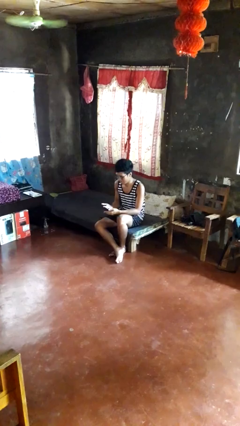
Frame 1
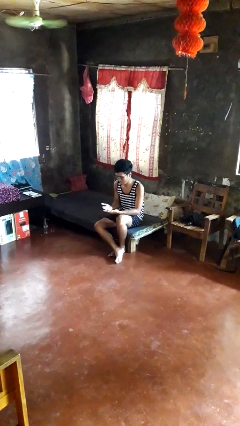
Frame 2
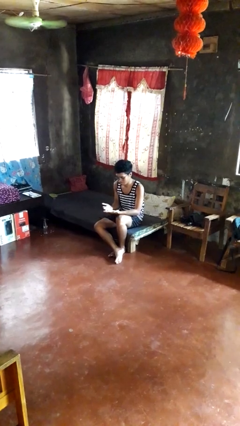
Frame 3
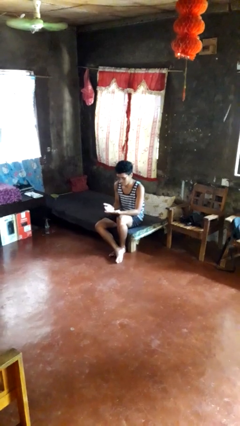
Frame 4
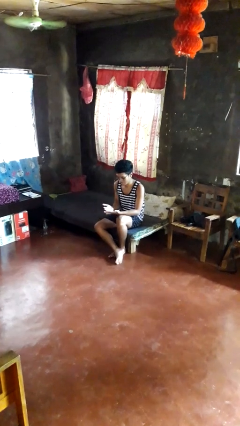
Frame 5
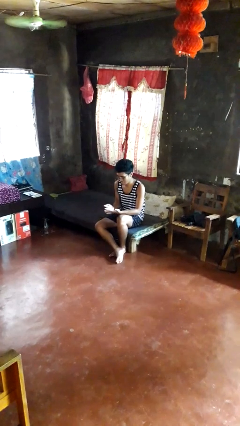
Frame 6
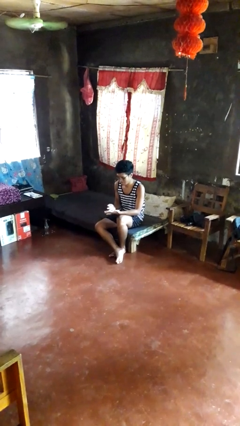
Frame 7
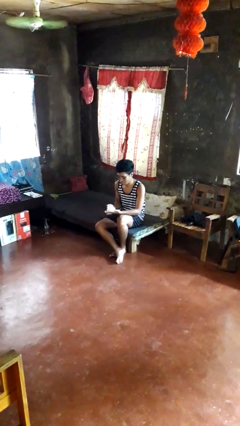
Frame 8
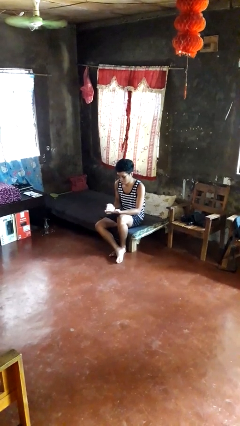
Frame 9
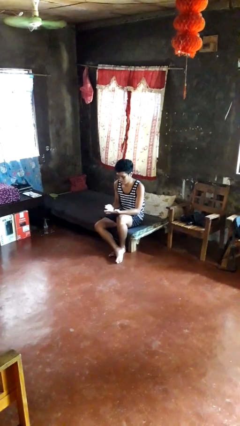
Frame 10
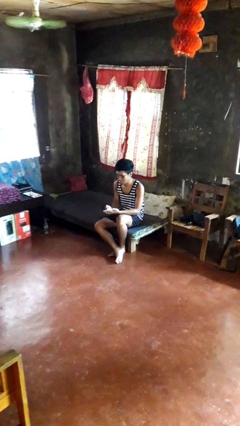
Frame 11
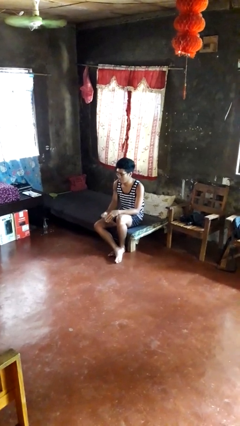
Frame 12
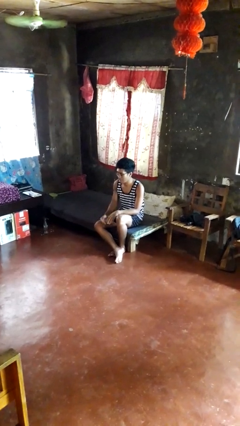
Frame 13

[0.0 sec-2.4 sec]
person looks at hands in lap

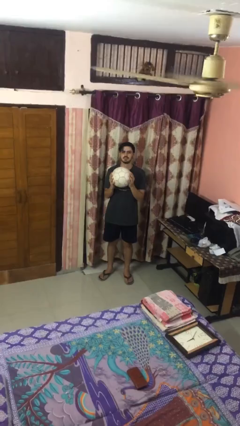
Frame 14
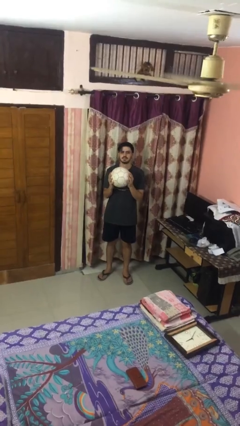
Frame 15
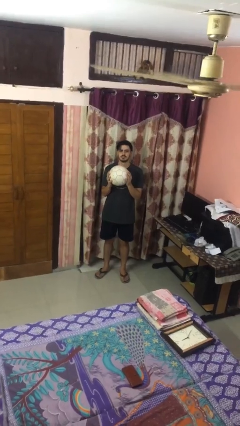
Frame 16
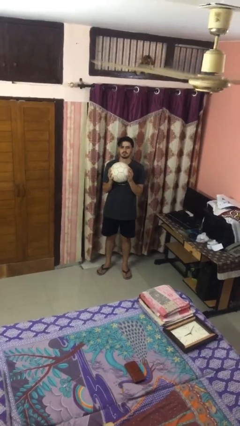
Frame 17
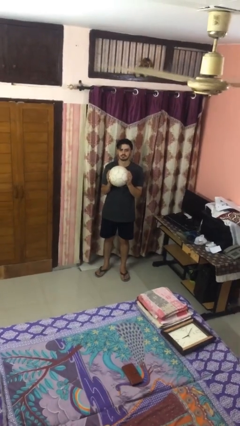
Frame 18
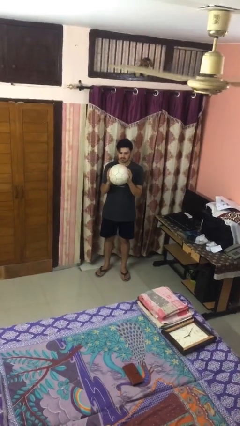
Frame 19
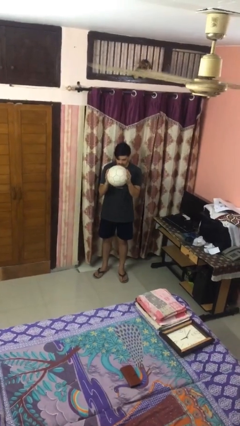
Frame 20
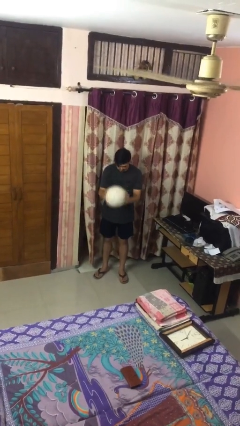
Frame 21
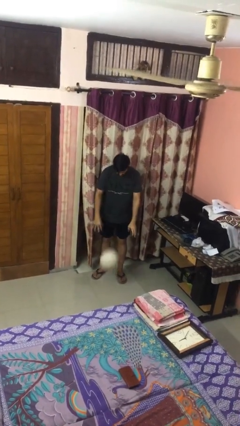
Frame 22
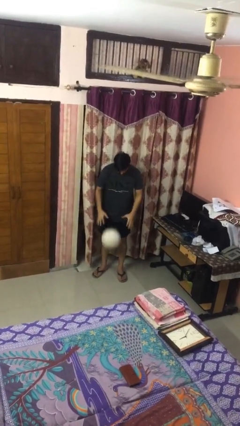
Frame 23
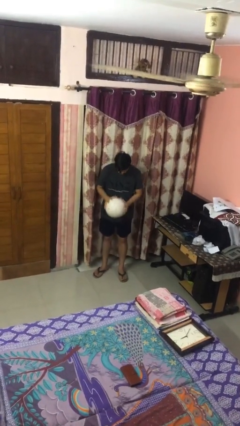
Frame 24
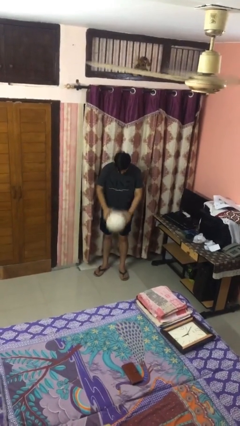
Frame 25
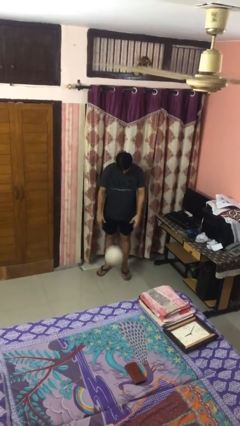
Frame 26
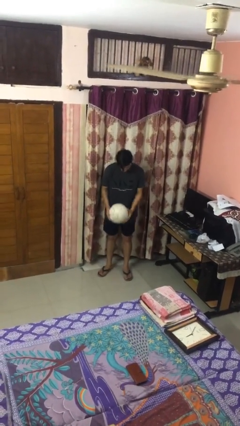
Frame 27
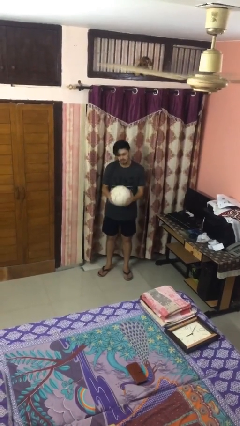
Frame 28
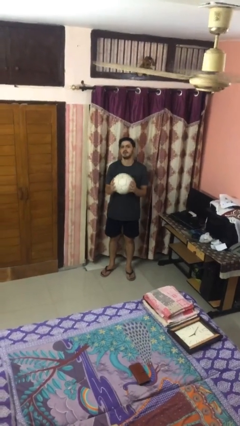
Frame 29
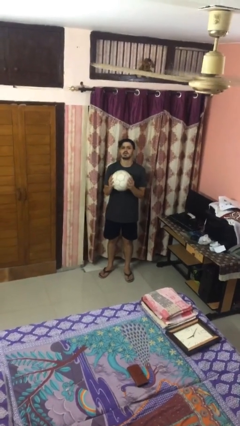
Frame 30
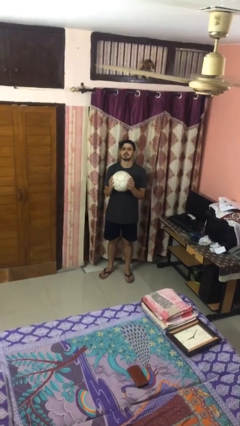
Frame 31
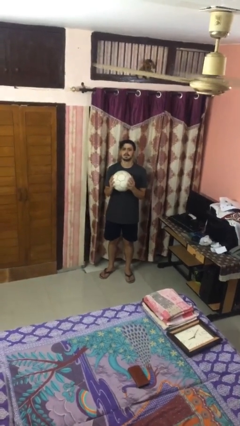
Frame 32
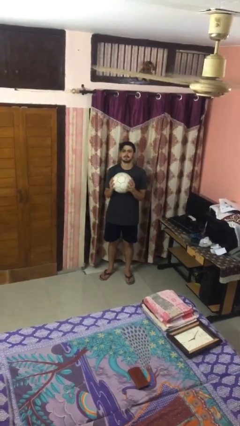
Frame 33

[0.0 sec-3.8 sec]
person bounces ball on floor

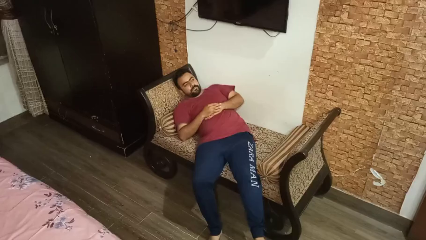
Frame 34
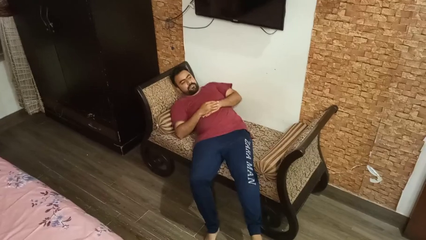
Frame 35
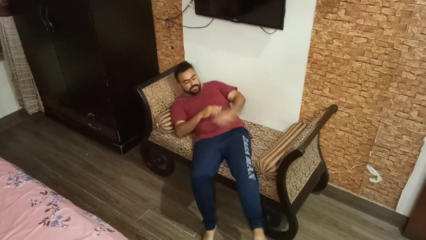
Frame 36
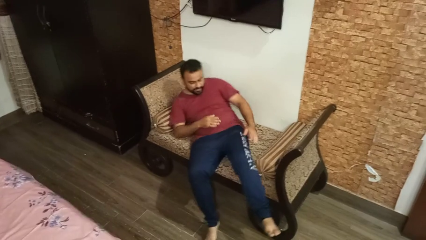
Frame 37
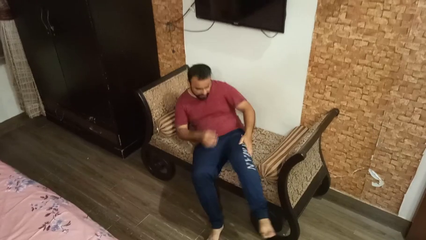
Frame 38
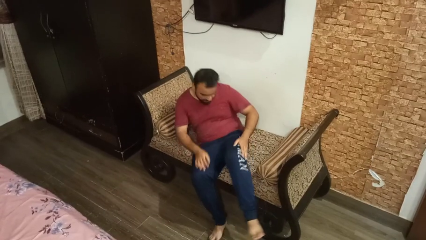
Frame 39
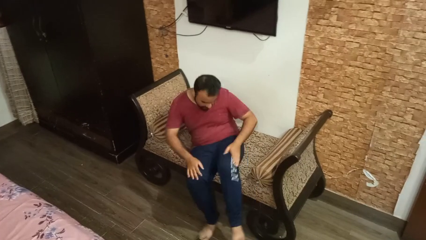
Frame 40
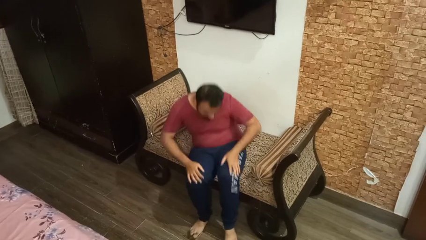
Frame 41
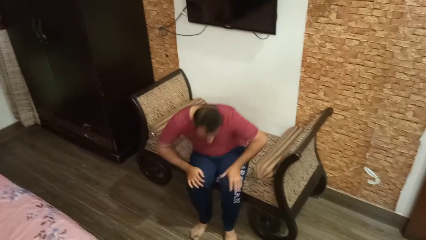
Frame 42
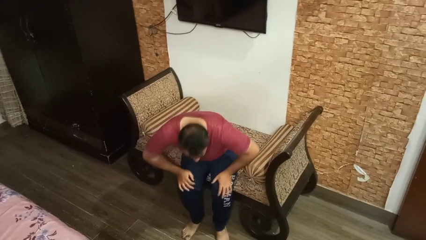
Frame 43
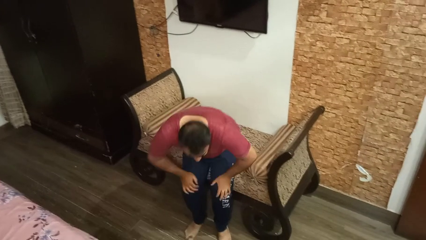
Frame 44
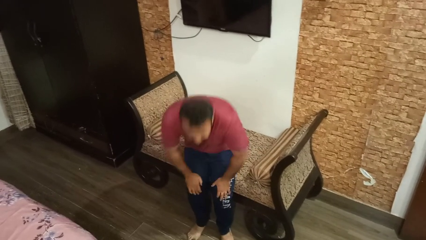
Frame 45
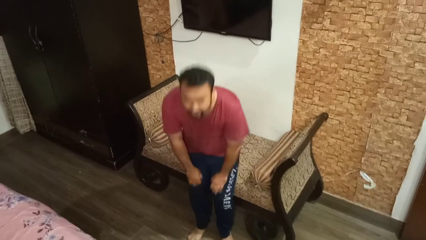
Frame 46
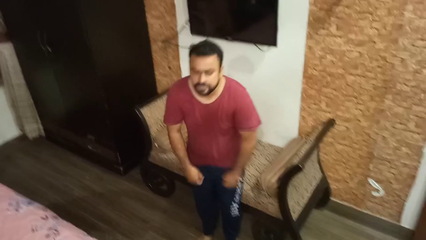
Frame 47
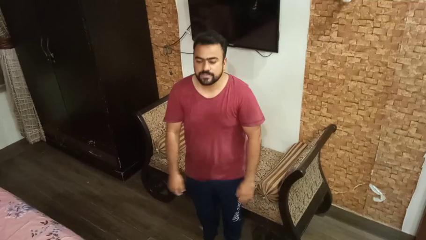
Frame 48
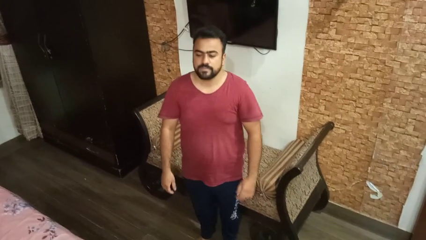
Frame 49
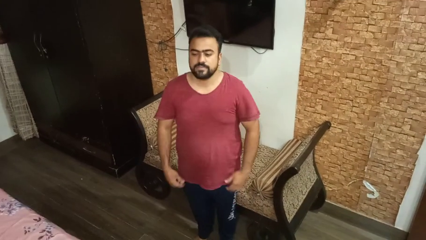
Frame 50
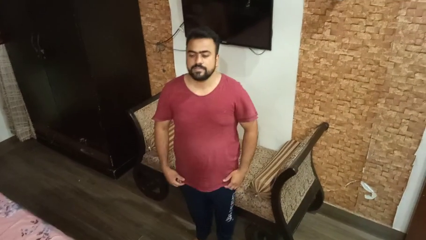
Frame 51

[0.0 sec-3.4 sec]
person stands up

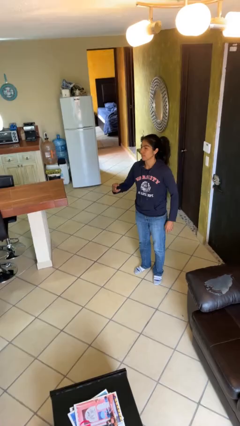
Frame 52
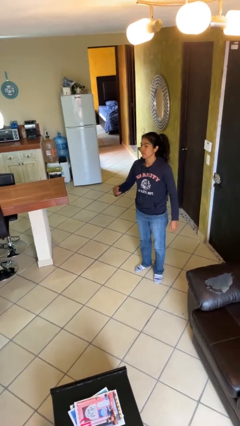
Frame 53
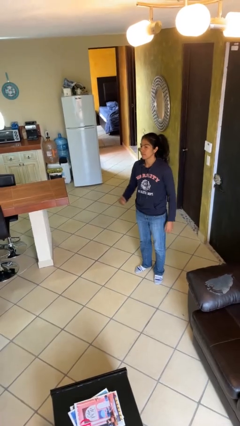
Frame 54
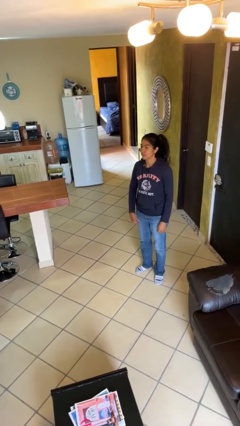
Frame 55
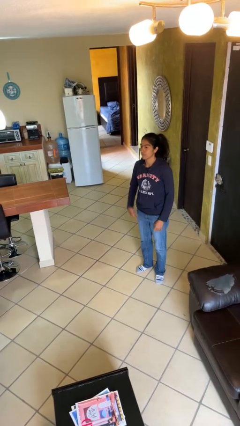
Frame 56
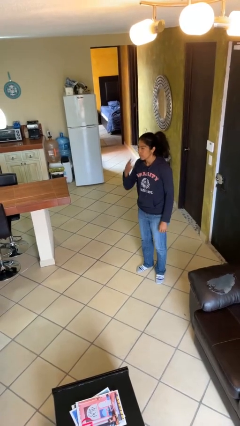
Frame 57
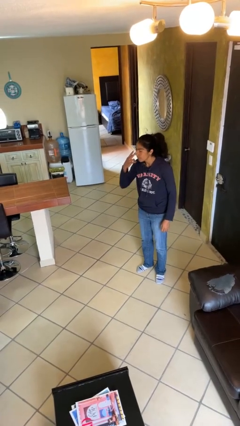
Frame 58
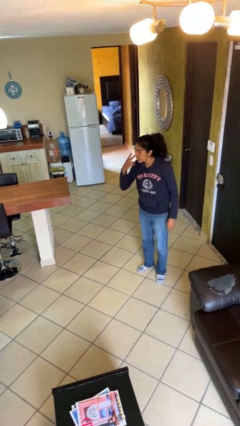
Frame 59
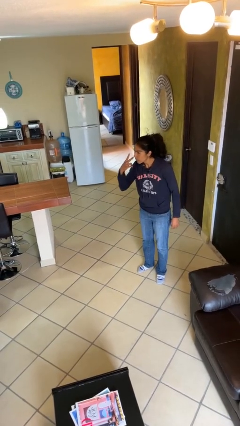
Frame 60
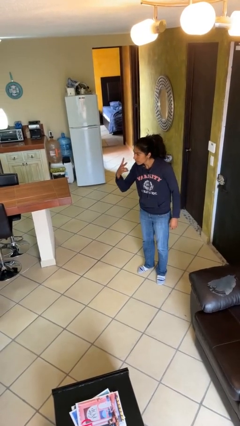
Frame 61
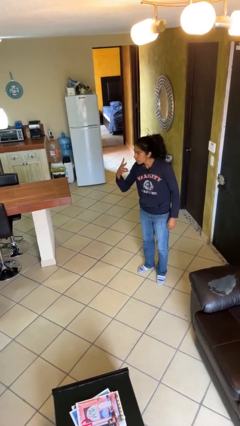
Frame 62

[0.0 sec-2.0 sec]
person gestures watch closely

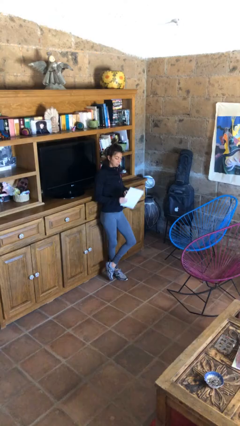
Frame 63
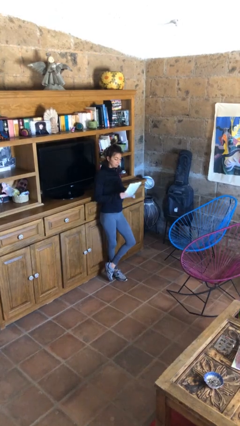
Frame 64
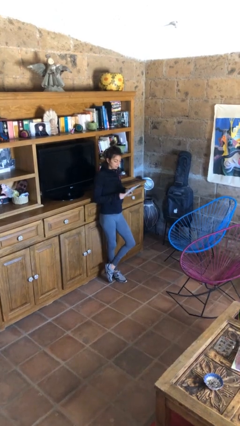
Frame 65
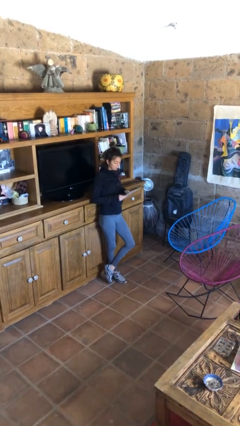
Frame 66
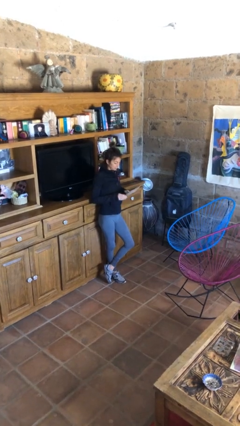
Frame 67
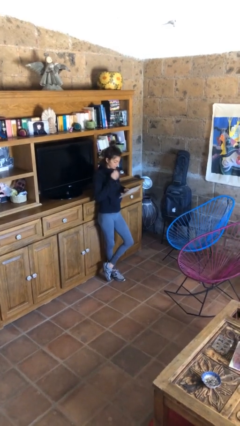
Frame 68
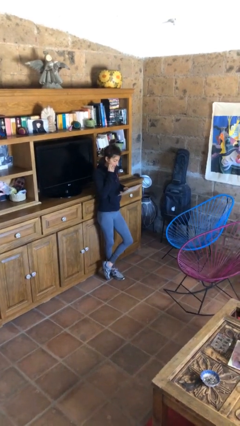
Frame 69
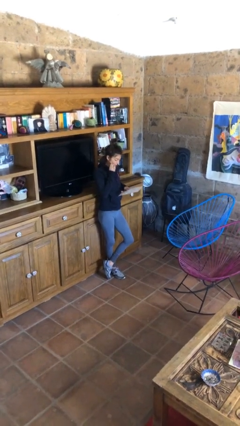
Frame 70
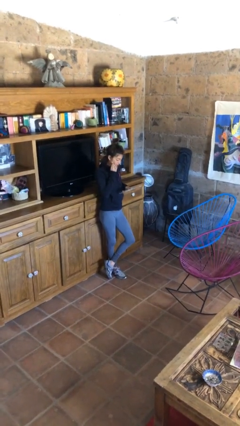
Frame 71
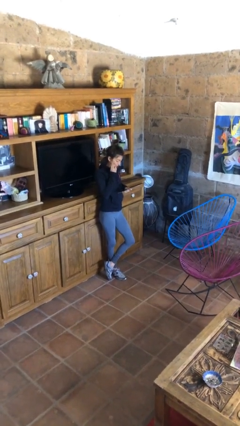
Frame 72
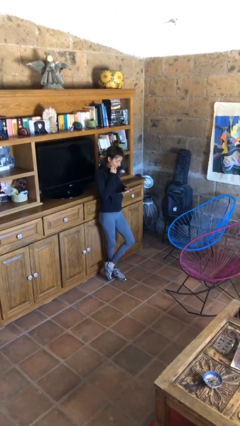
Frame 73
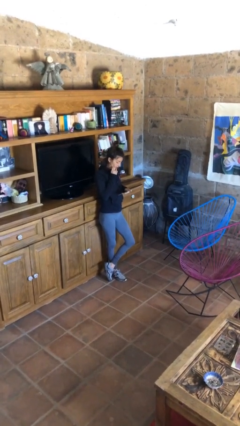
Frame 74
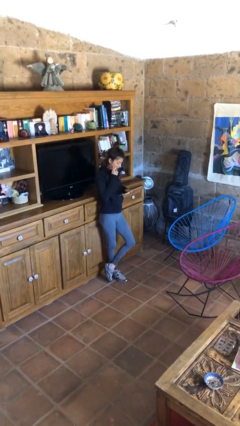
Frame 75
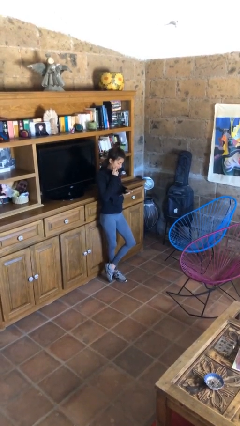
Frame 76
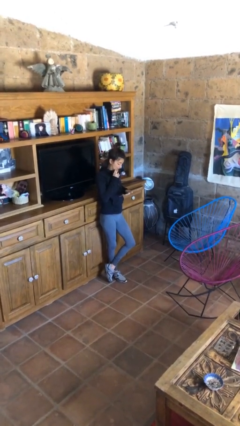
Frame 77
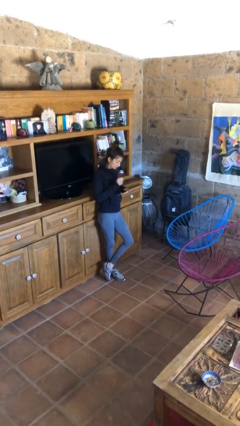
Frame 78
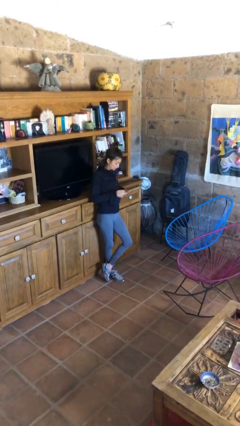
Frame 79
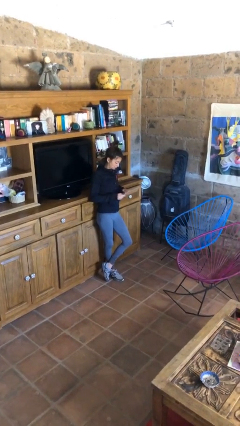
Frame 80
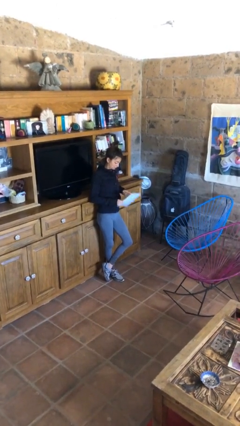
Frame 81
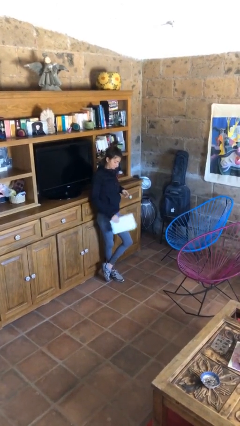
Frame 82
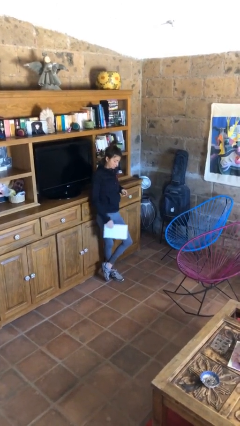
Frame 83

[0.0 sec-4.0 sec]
person reads document

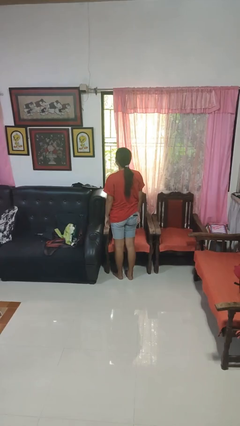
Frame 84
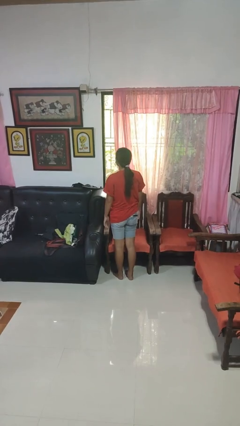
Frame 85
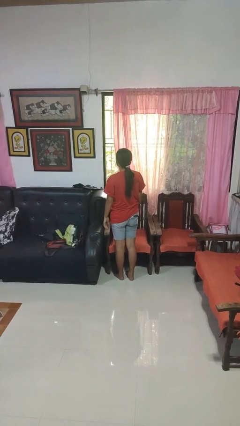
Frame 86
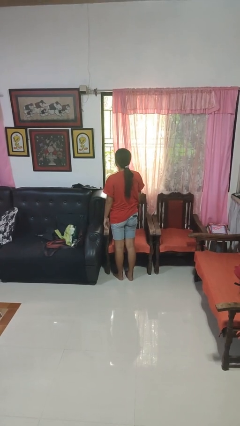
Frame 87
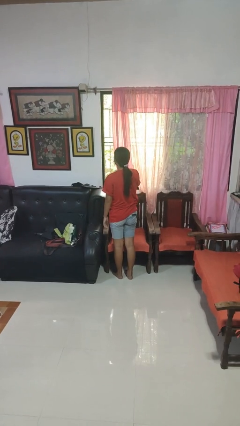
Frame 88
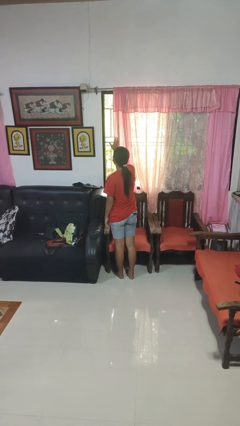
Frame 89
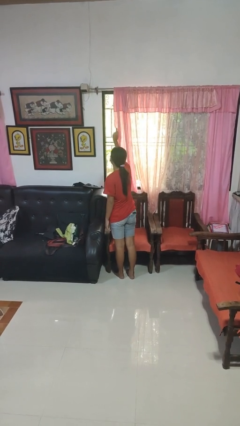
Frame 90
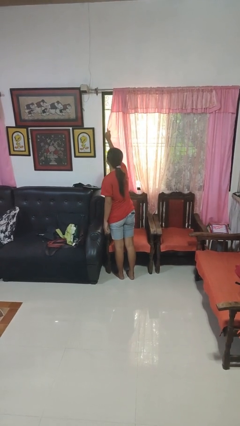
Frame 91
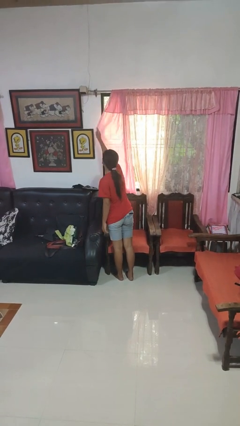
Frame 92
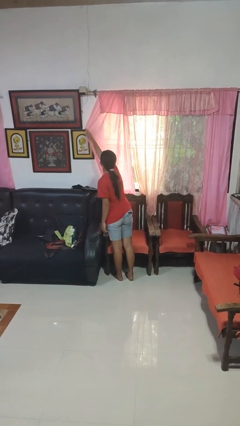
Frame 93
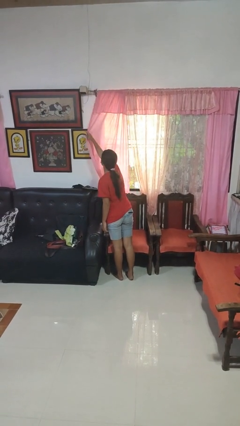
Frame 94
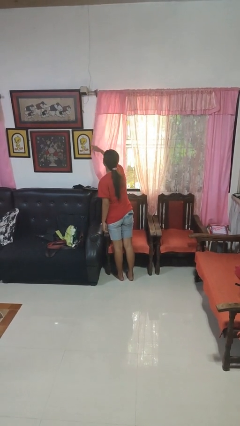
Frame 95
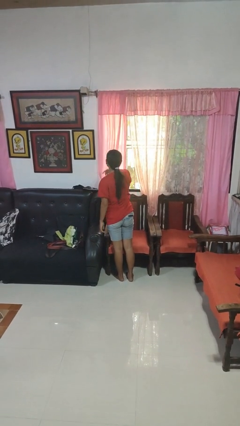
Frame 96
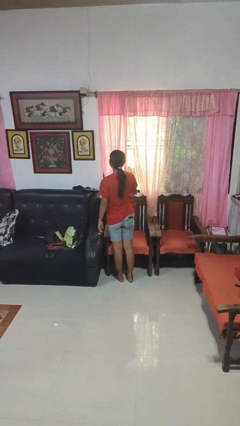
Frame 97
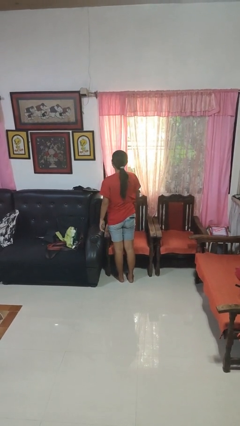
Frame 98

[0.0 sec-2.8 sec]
person closes curtains
